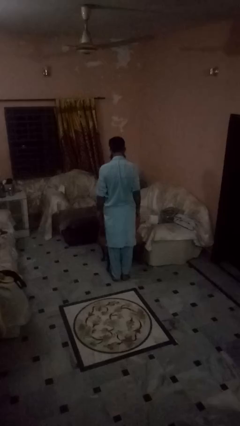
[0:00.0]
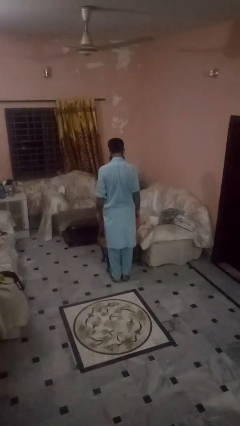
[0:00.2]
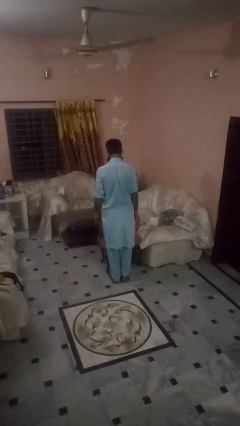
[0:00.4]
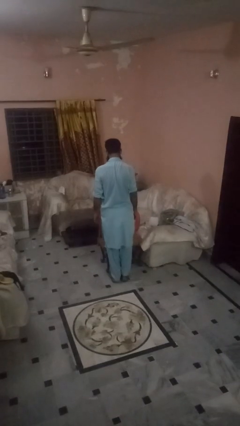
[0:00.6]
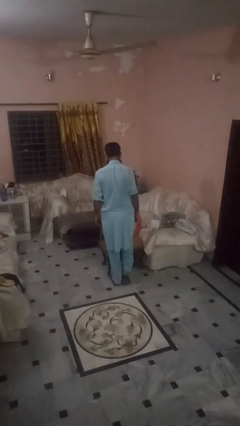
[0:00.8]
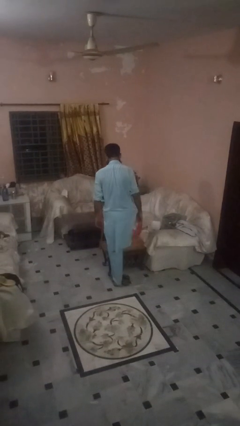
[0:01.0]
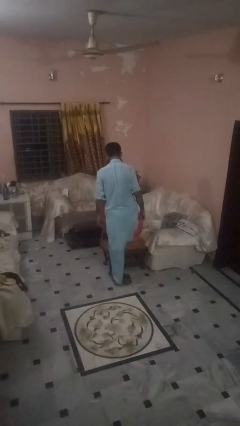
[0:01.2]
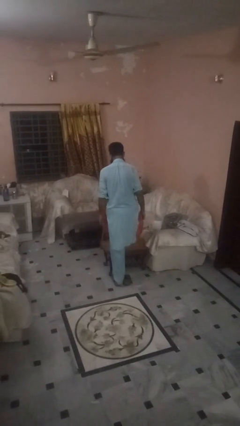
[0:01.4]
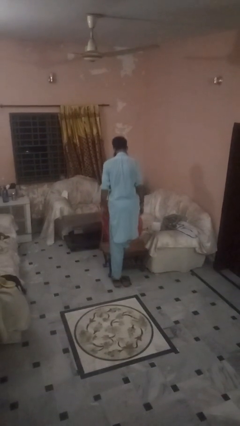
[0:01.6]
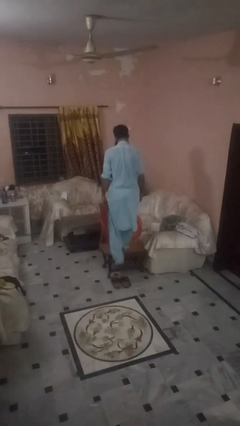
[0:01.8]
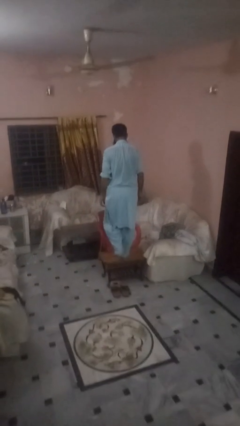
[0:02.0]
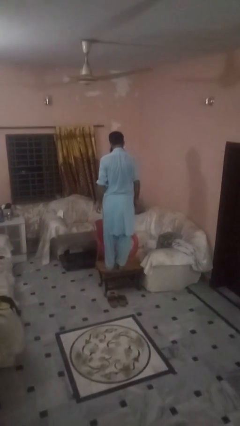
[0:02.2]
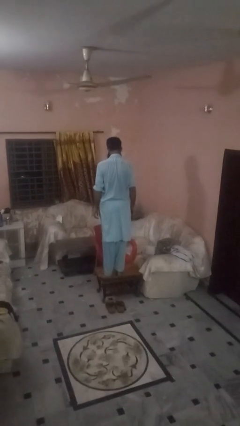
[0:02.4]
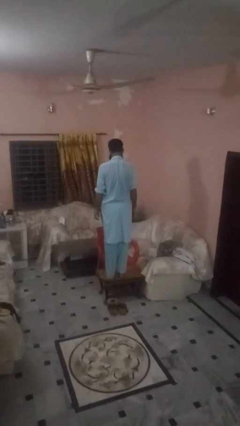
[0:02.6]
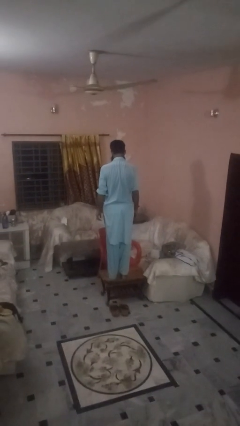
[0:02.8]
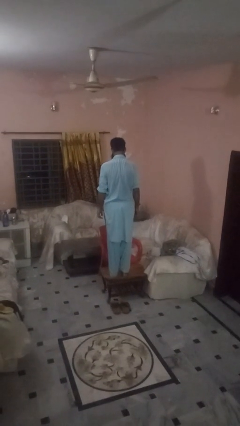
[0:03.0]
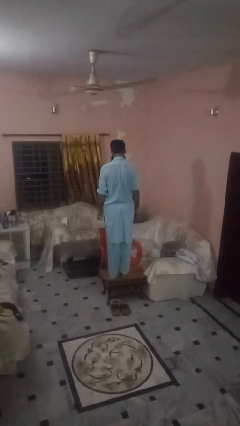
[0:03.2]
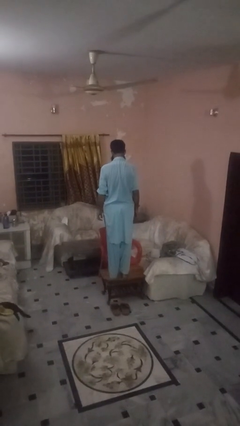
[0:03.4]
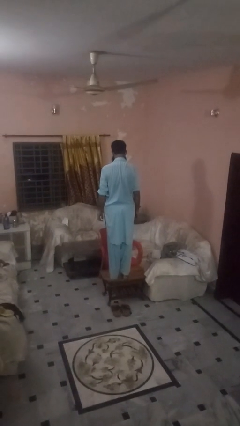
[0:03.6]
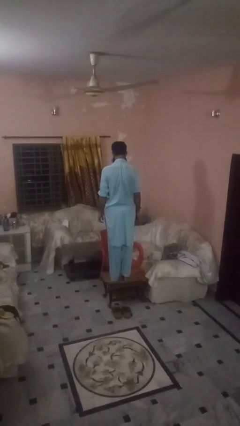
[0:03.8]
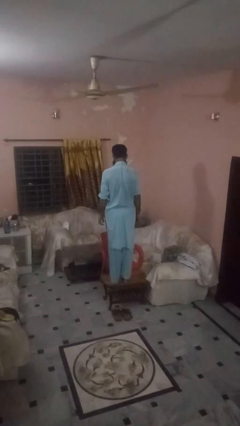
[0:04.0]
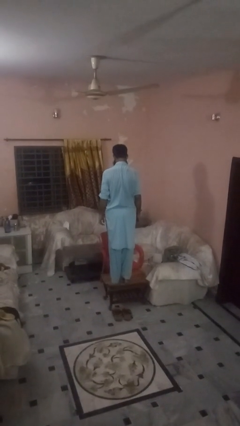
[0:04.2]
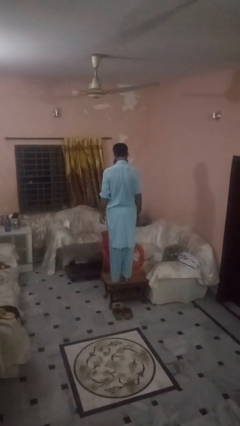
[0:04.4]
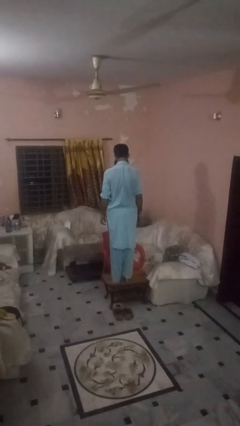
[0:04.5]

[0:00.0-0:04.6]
person climbs on table

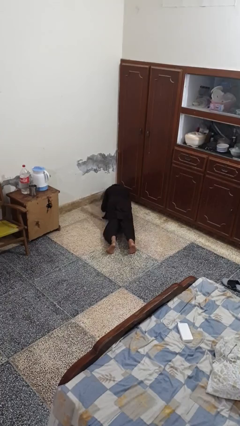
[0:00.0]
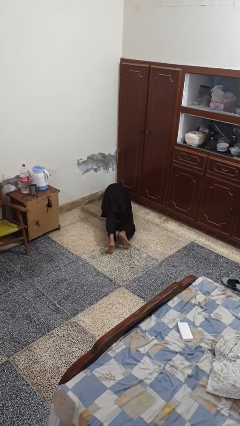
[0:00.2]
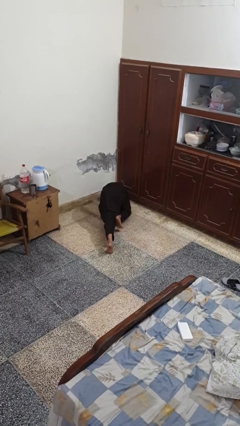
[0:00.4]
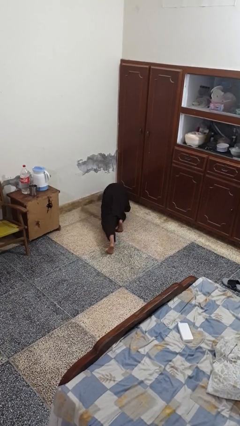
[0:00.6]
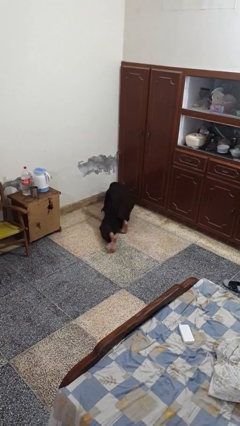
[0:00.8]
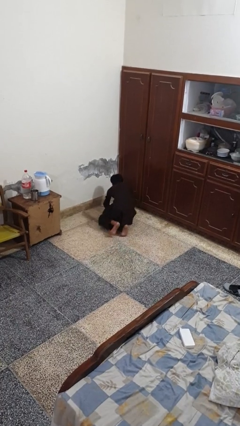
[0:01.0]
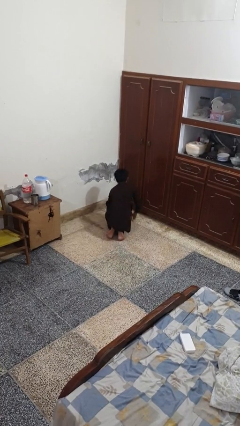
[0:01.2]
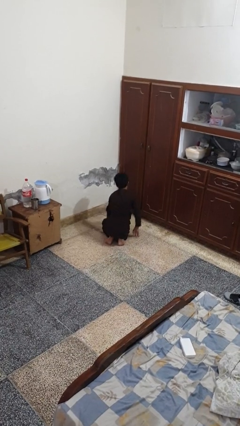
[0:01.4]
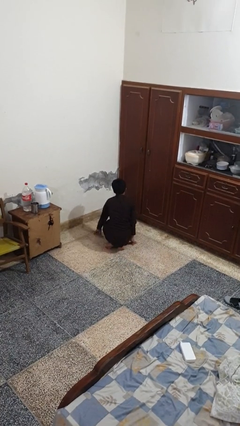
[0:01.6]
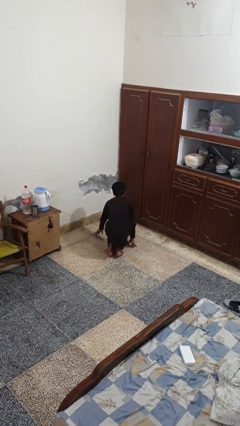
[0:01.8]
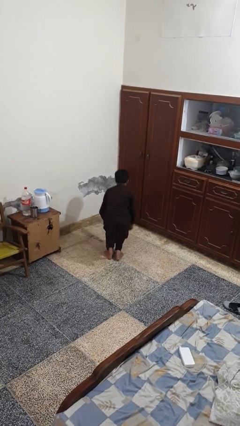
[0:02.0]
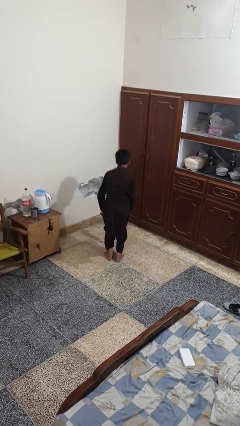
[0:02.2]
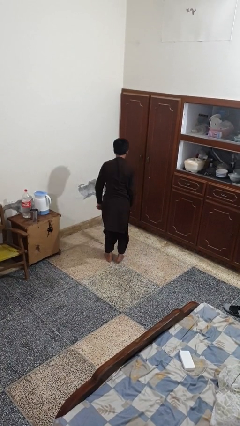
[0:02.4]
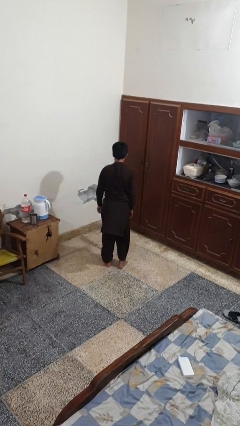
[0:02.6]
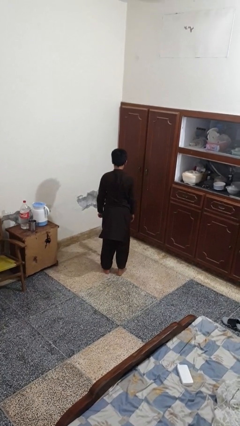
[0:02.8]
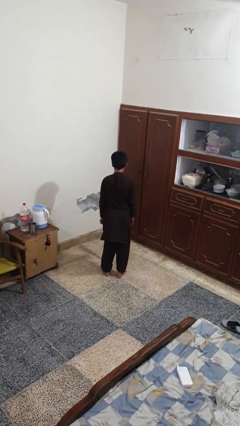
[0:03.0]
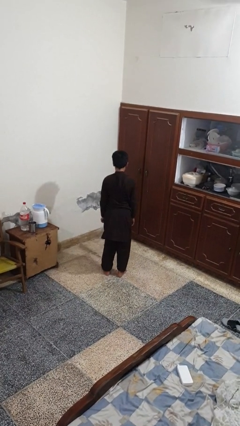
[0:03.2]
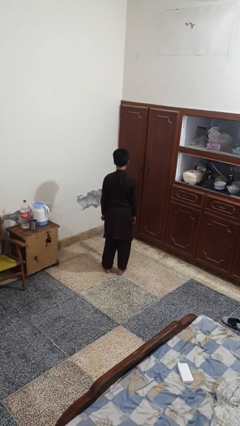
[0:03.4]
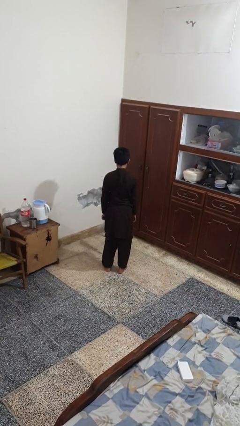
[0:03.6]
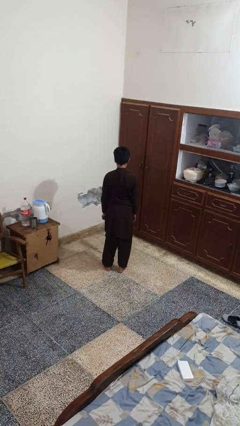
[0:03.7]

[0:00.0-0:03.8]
person stands up from floor

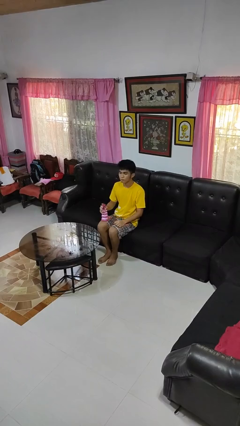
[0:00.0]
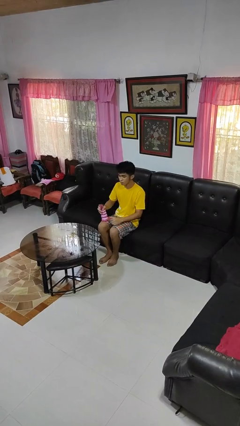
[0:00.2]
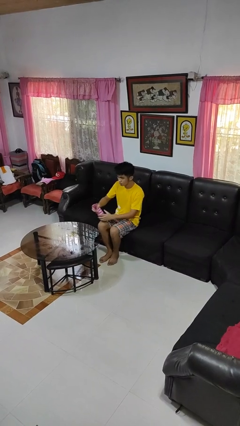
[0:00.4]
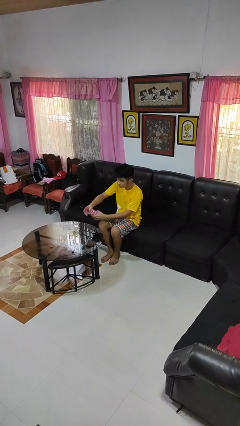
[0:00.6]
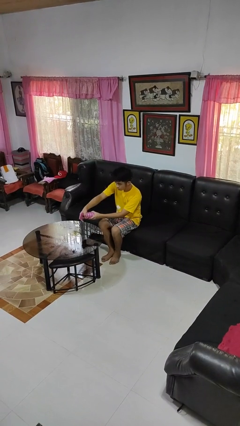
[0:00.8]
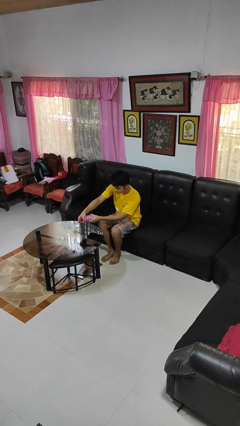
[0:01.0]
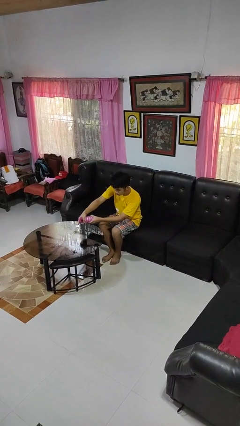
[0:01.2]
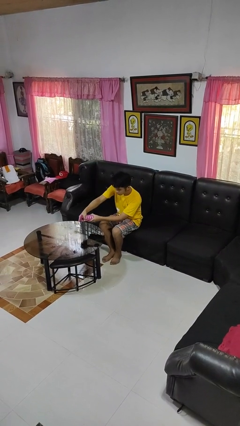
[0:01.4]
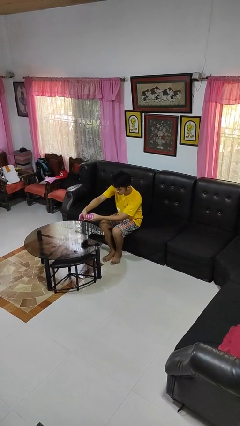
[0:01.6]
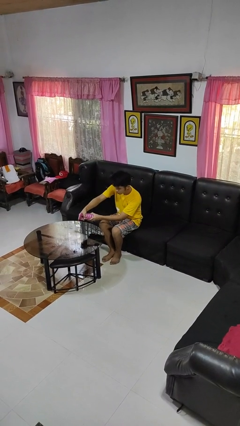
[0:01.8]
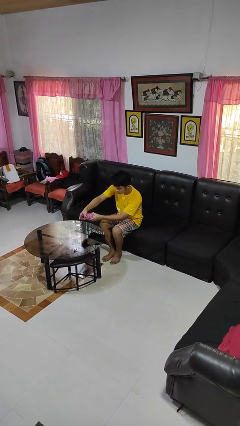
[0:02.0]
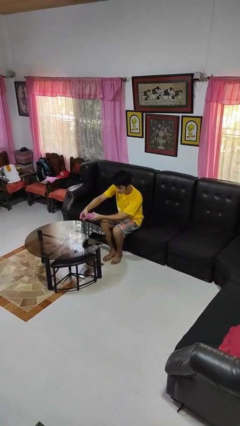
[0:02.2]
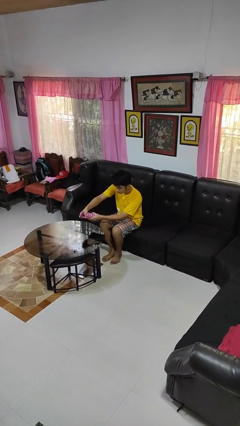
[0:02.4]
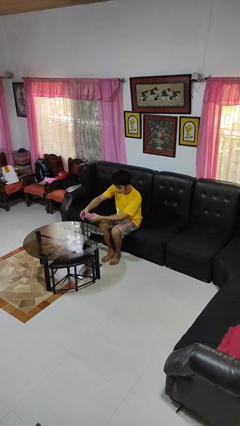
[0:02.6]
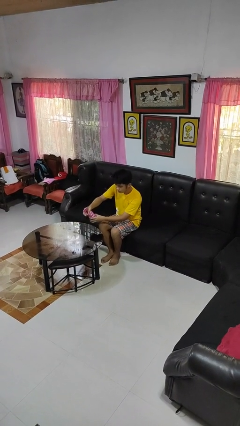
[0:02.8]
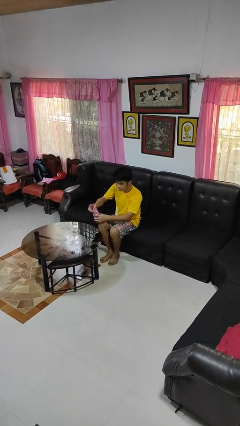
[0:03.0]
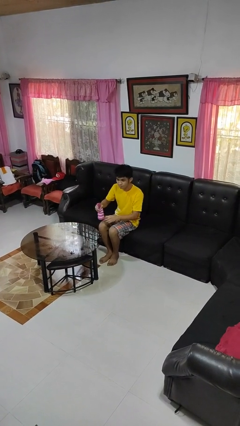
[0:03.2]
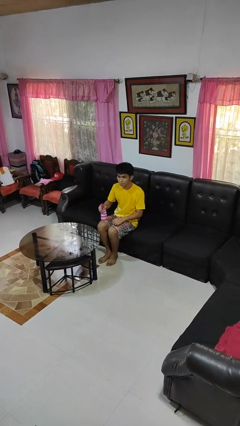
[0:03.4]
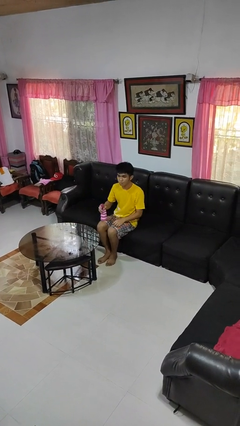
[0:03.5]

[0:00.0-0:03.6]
person sprays from bottle

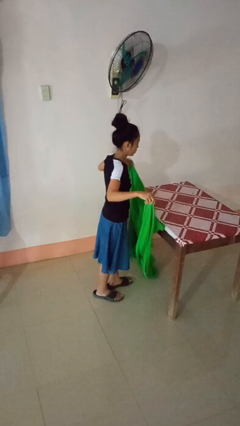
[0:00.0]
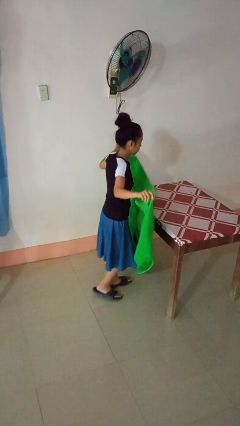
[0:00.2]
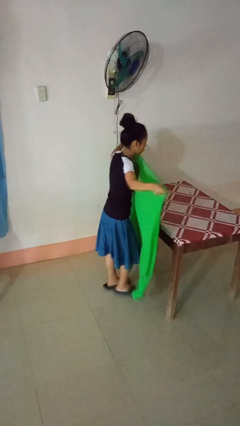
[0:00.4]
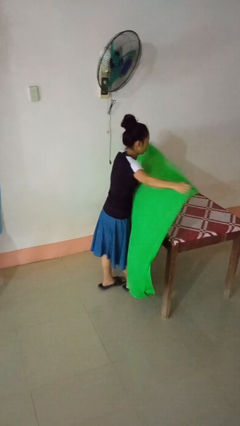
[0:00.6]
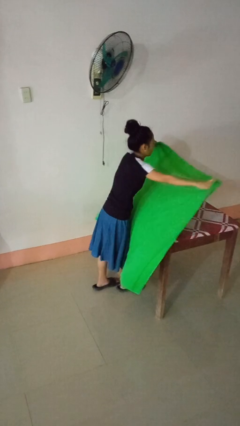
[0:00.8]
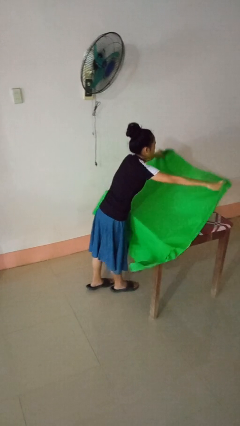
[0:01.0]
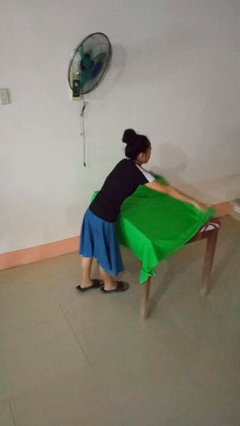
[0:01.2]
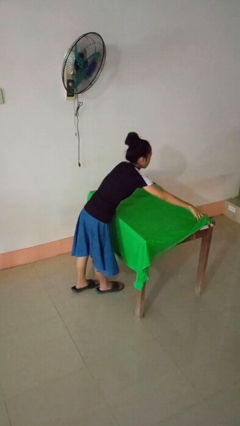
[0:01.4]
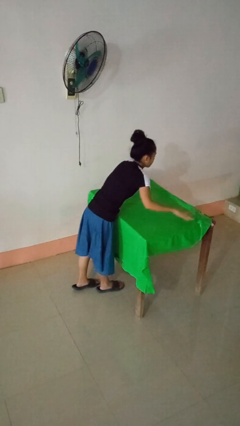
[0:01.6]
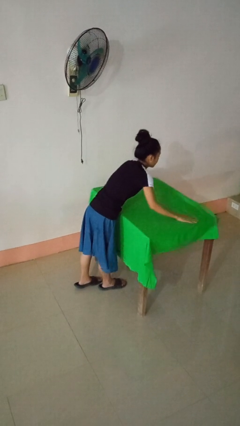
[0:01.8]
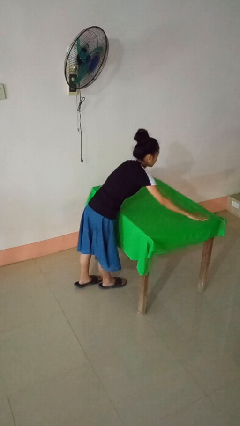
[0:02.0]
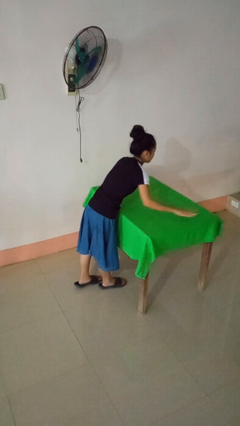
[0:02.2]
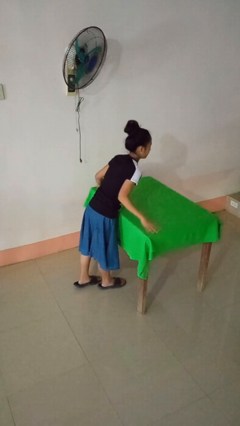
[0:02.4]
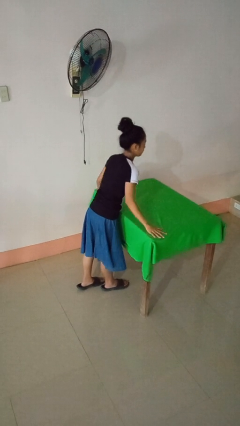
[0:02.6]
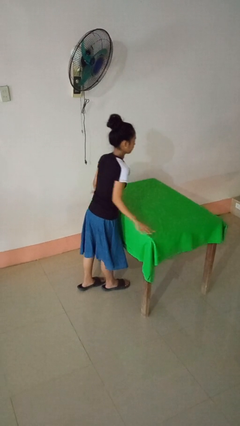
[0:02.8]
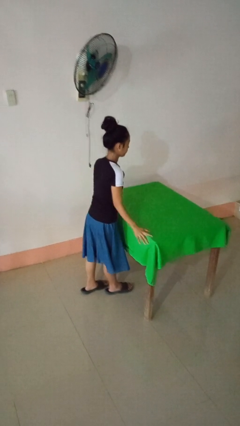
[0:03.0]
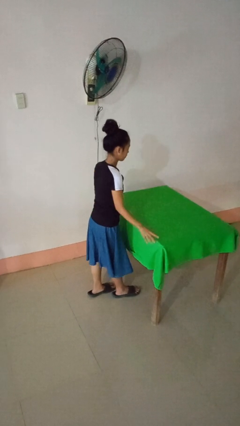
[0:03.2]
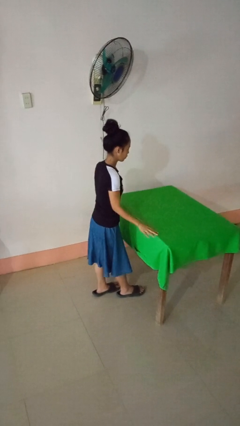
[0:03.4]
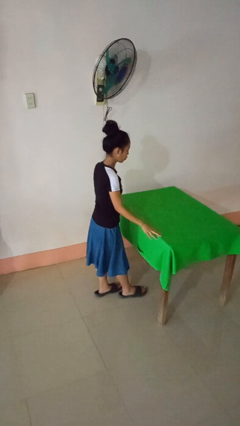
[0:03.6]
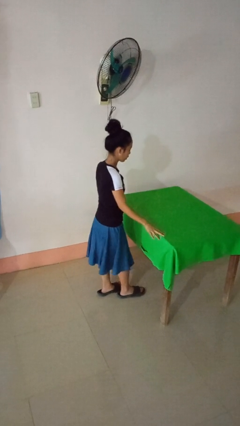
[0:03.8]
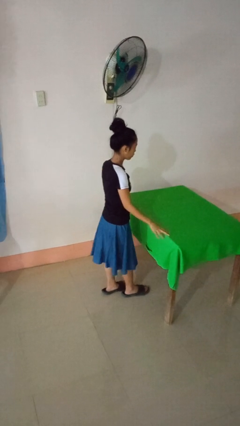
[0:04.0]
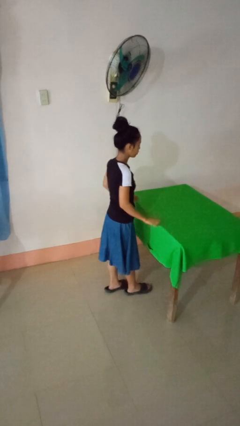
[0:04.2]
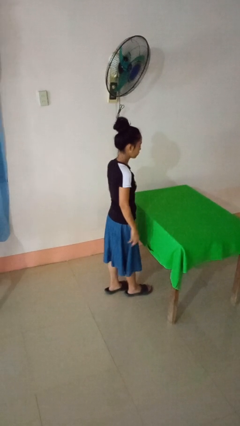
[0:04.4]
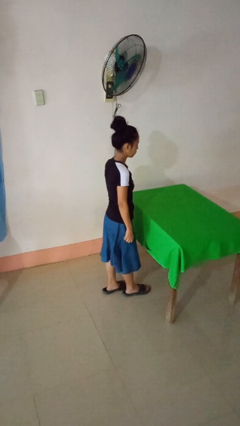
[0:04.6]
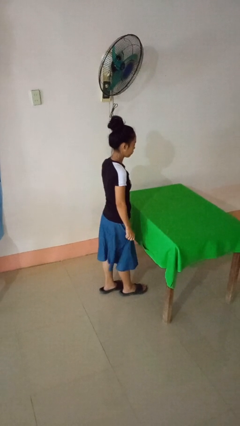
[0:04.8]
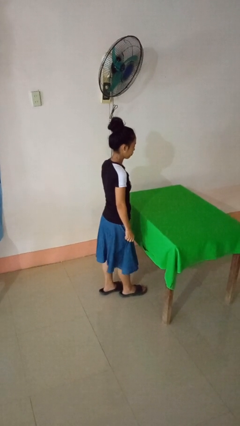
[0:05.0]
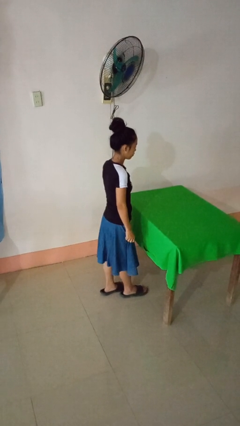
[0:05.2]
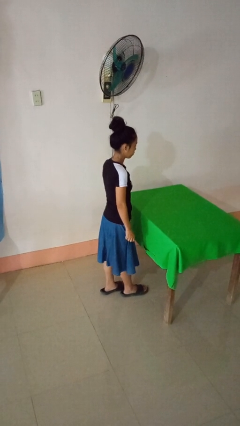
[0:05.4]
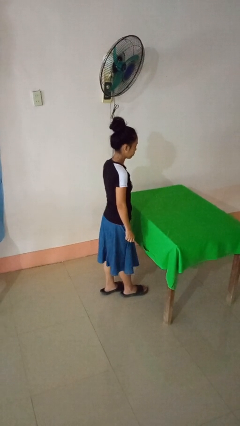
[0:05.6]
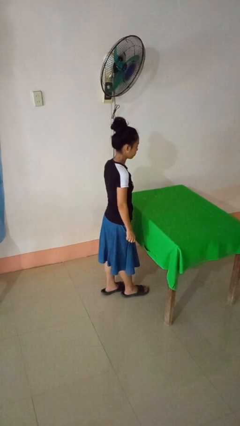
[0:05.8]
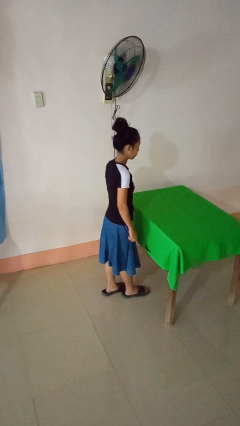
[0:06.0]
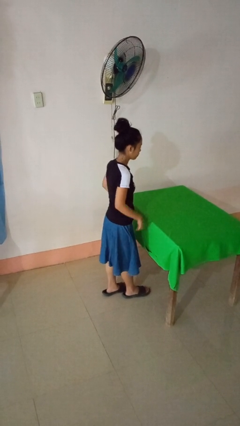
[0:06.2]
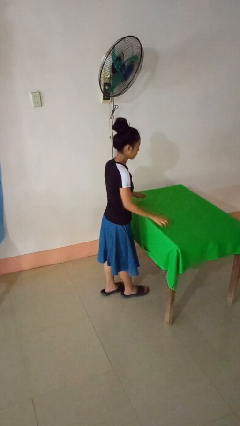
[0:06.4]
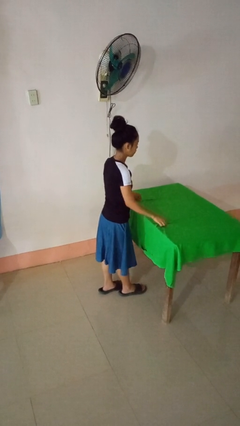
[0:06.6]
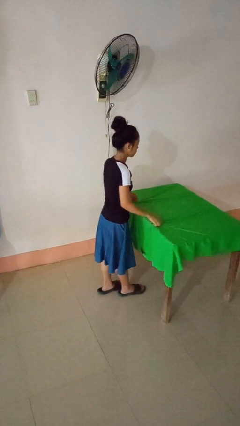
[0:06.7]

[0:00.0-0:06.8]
person spreads tablecloth
